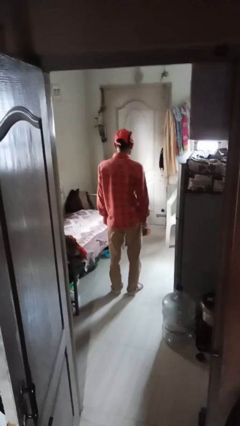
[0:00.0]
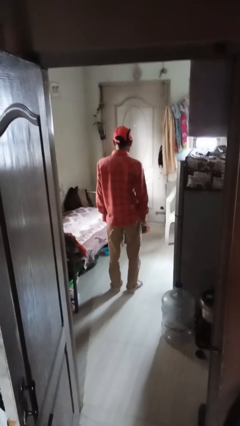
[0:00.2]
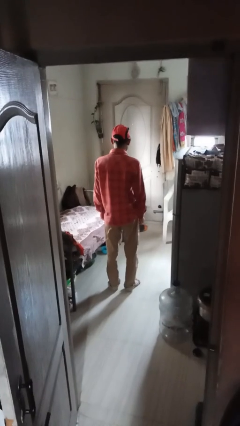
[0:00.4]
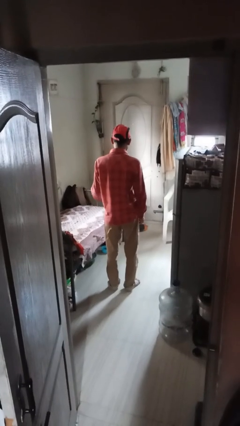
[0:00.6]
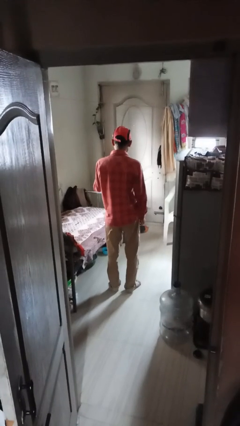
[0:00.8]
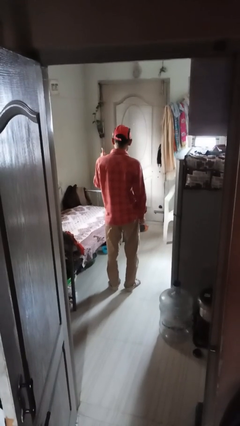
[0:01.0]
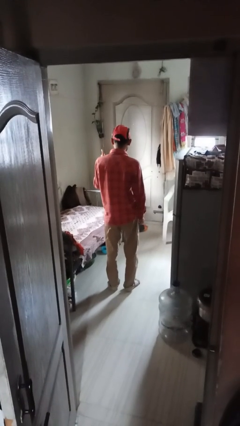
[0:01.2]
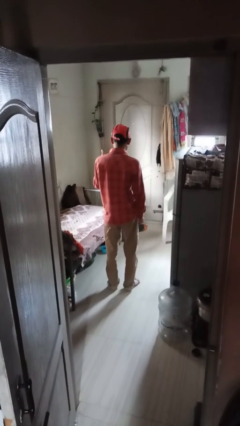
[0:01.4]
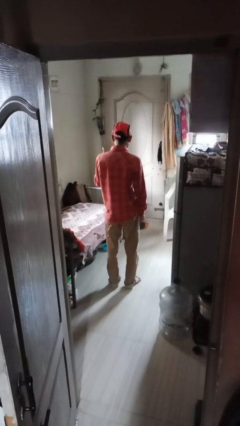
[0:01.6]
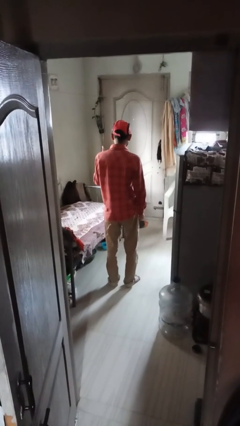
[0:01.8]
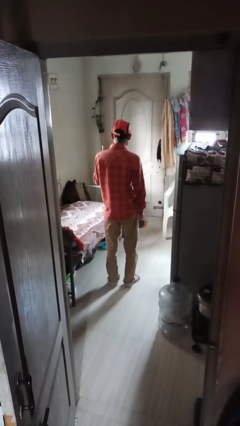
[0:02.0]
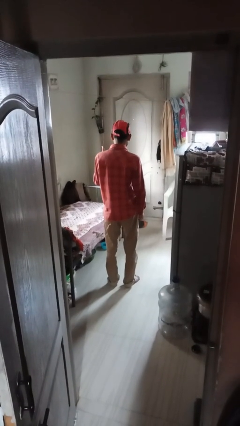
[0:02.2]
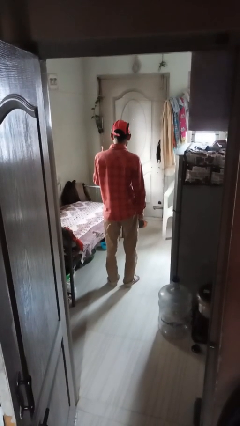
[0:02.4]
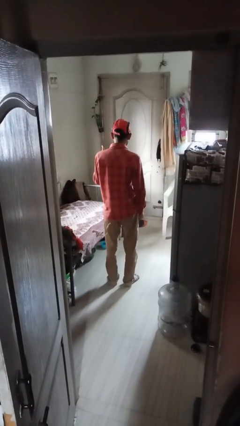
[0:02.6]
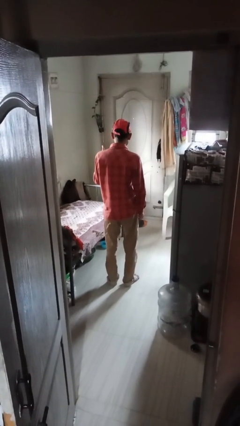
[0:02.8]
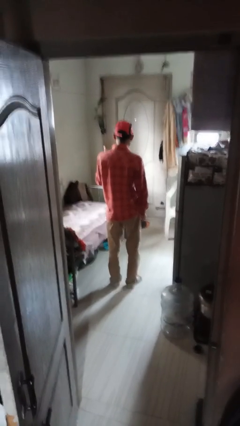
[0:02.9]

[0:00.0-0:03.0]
person gestures thumbs up

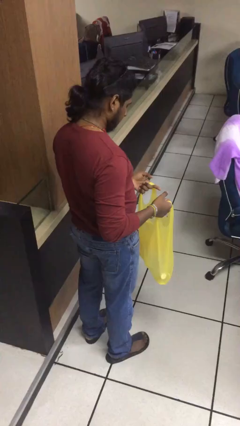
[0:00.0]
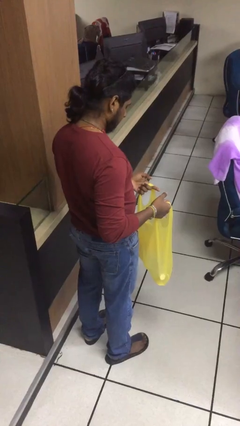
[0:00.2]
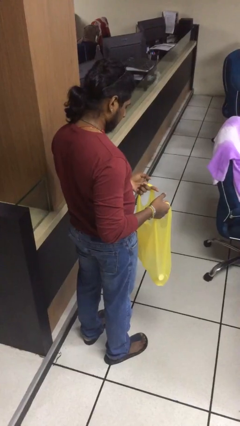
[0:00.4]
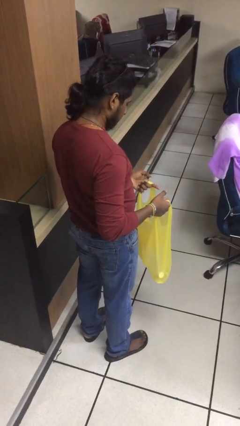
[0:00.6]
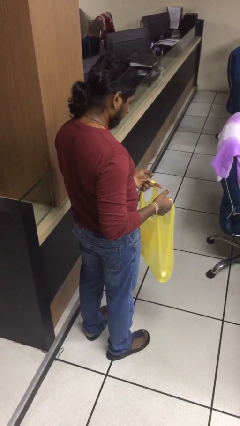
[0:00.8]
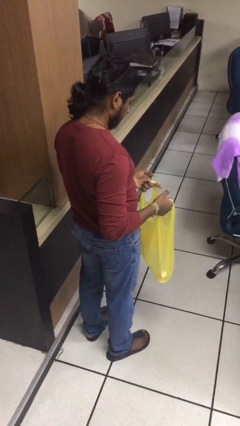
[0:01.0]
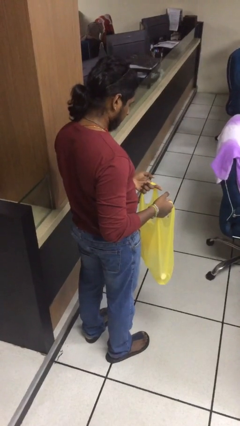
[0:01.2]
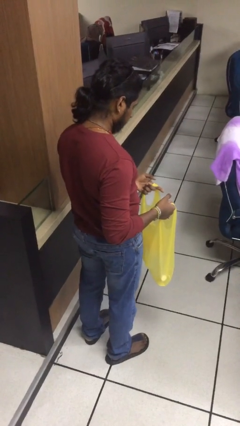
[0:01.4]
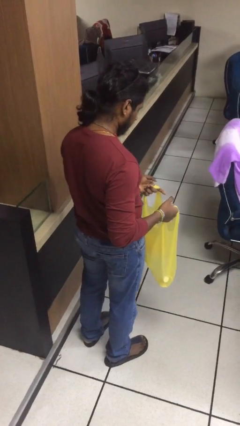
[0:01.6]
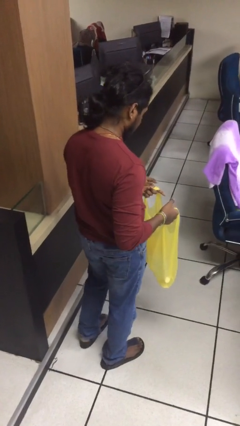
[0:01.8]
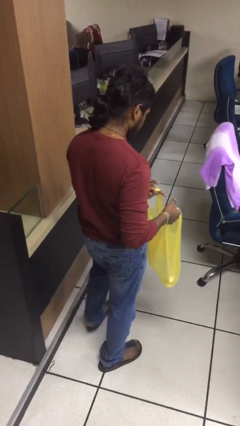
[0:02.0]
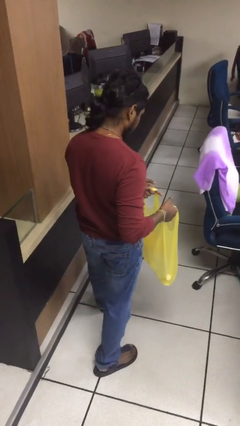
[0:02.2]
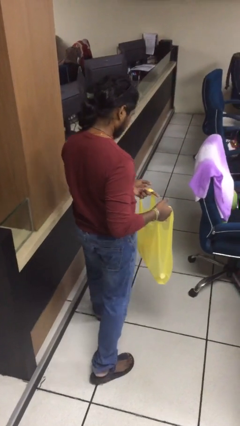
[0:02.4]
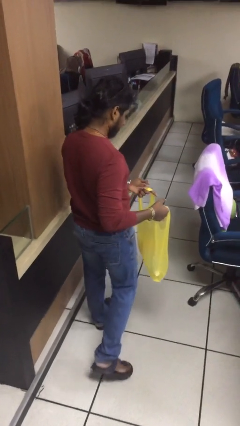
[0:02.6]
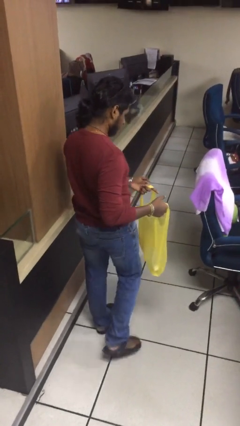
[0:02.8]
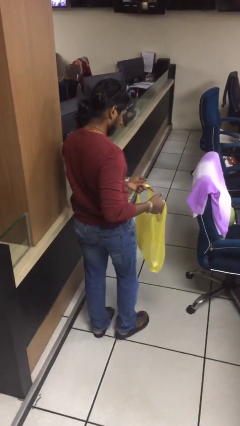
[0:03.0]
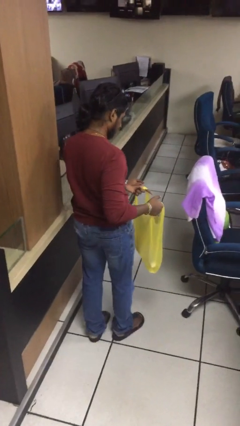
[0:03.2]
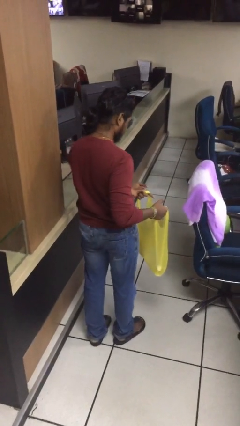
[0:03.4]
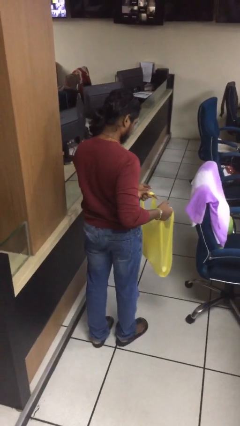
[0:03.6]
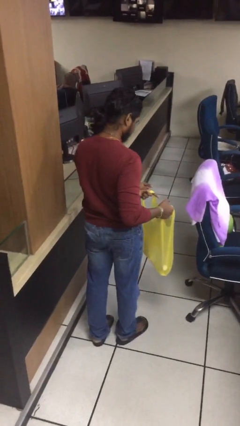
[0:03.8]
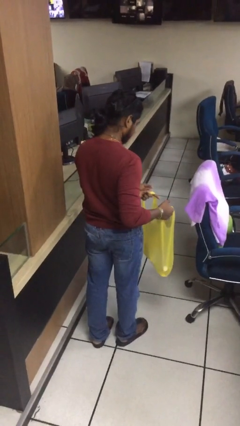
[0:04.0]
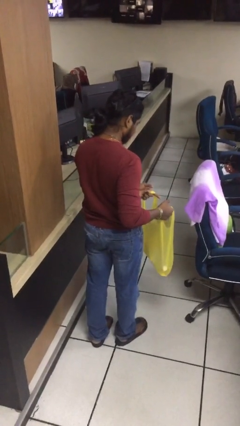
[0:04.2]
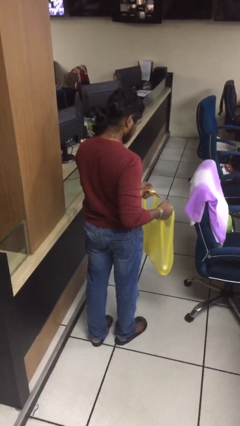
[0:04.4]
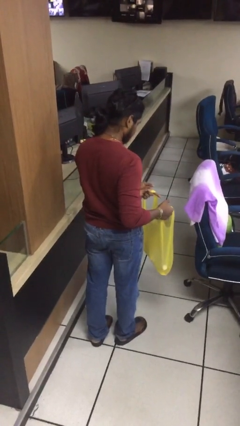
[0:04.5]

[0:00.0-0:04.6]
person carries groceries

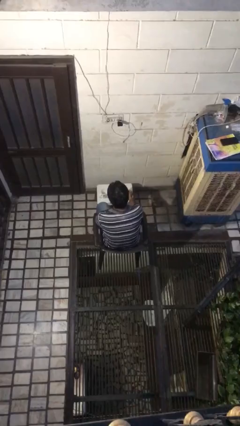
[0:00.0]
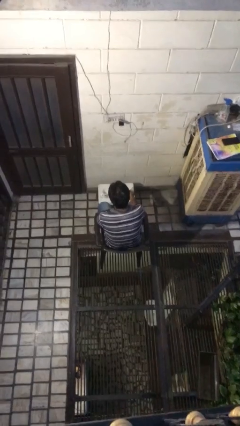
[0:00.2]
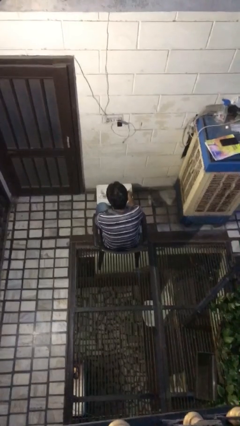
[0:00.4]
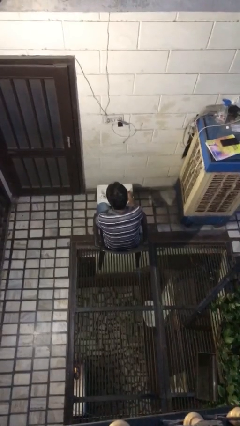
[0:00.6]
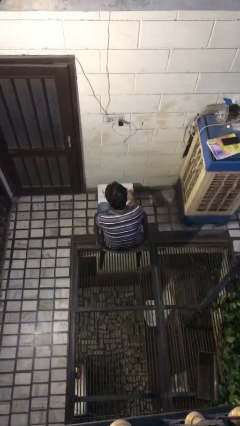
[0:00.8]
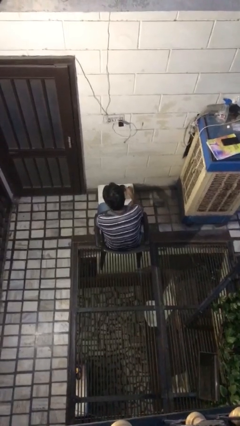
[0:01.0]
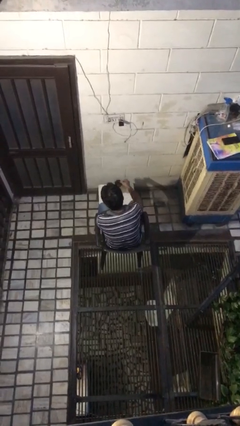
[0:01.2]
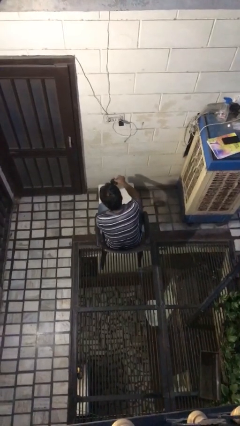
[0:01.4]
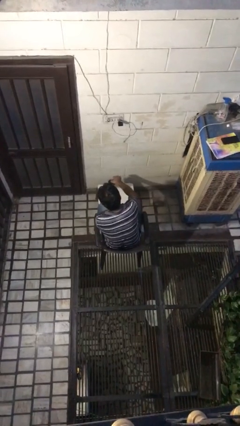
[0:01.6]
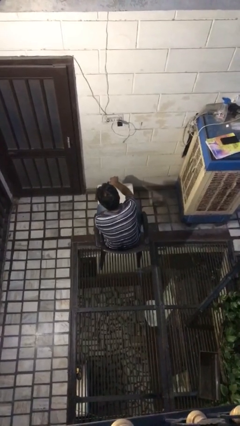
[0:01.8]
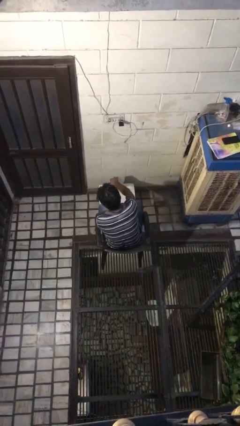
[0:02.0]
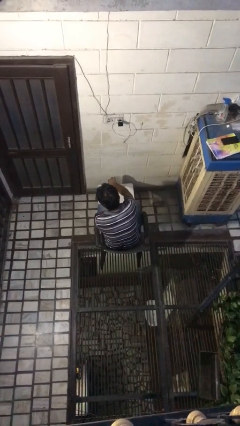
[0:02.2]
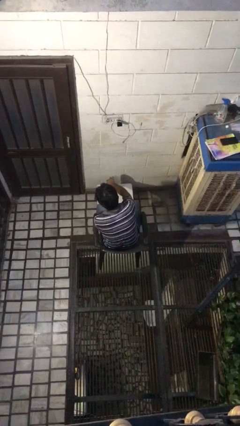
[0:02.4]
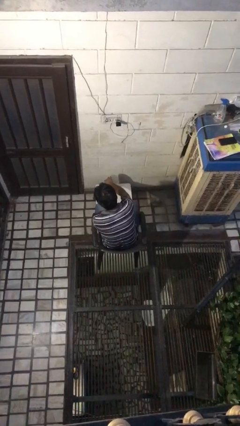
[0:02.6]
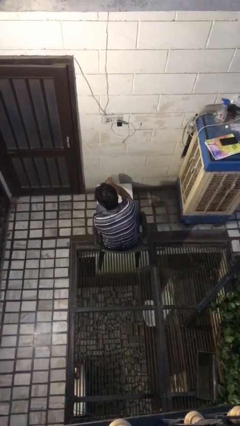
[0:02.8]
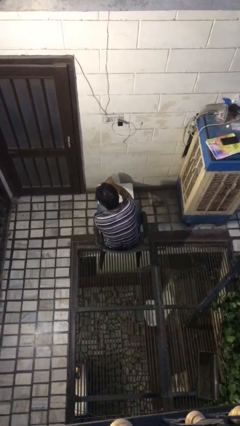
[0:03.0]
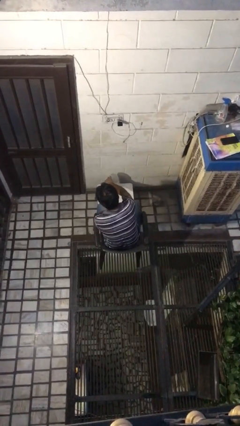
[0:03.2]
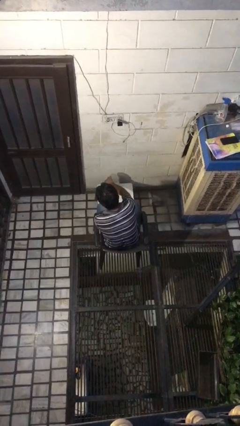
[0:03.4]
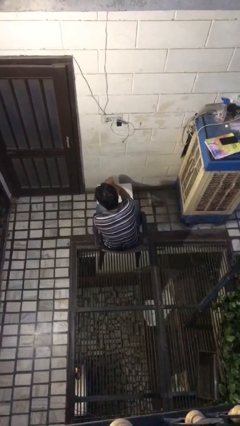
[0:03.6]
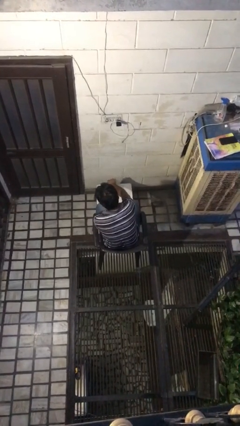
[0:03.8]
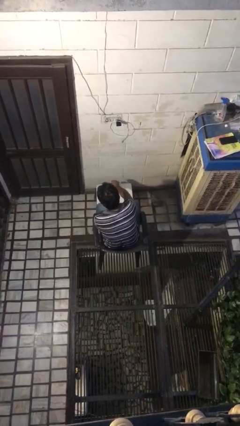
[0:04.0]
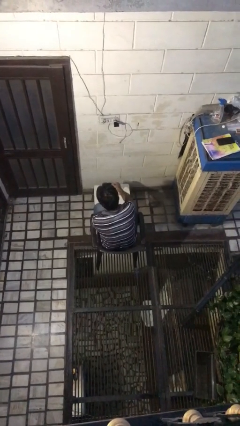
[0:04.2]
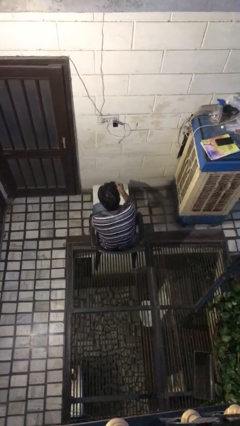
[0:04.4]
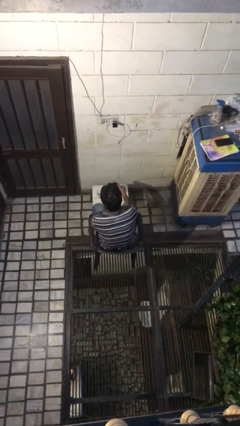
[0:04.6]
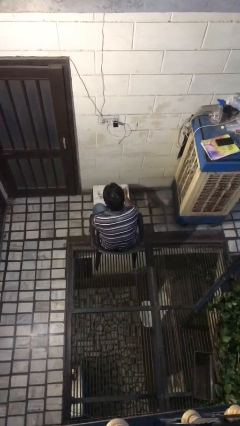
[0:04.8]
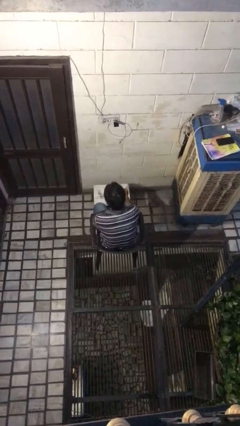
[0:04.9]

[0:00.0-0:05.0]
person pours coffee into mug

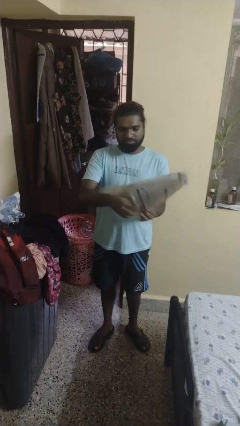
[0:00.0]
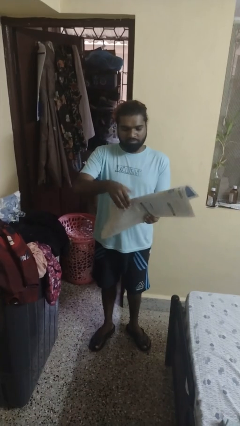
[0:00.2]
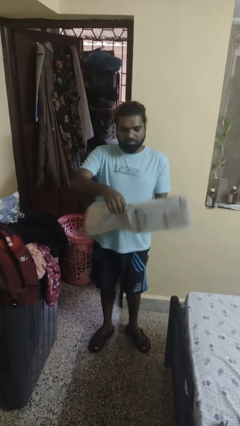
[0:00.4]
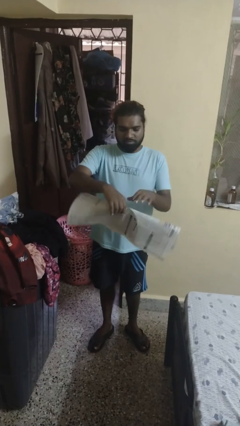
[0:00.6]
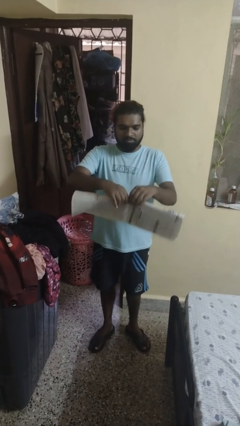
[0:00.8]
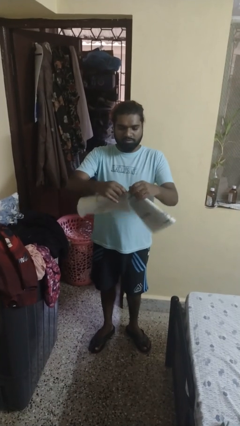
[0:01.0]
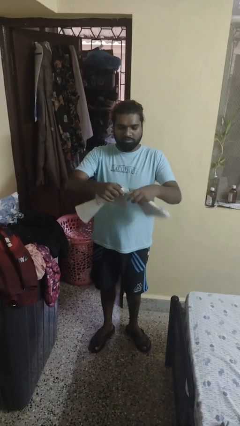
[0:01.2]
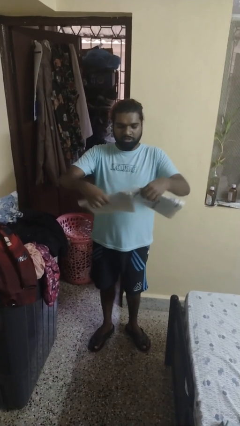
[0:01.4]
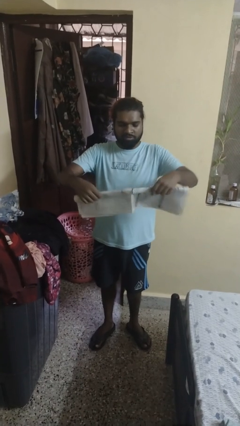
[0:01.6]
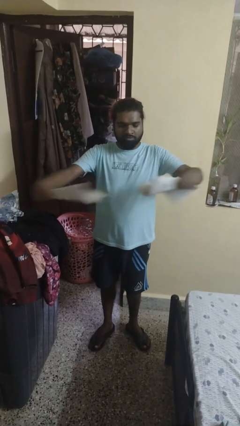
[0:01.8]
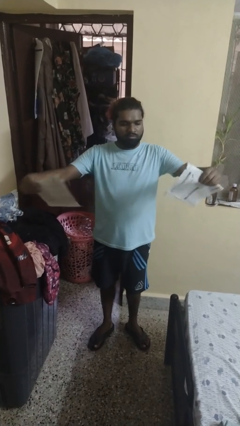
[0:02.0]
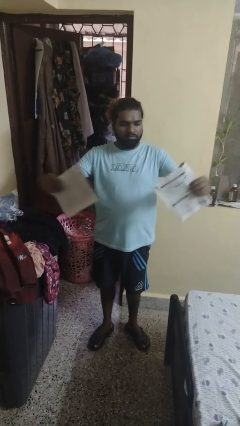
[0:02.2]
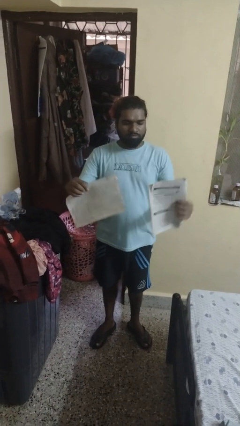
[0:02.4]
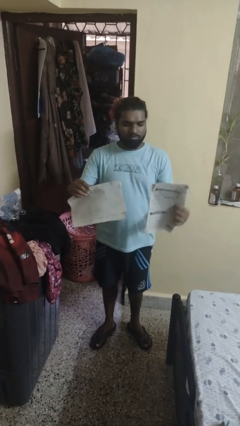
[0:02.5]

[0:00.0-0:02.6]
person tears paper

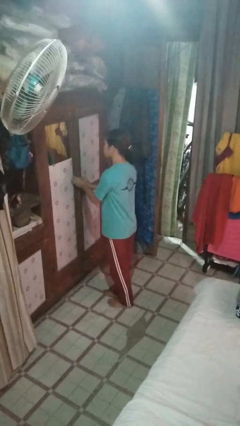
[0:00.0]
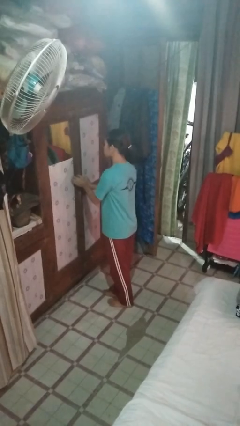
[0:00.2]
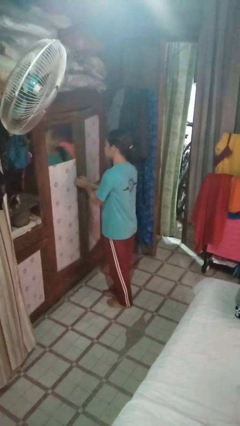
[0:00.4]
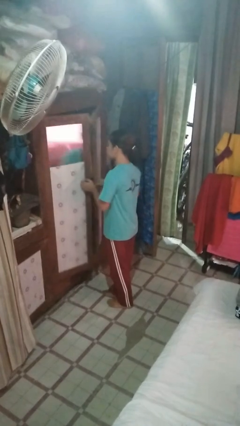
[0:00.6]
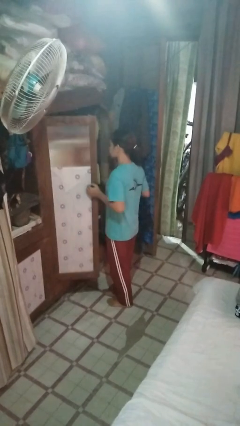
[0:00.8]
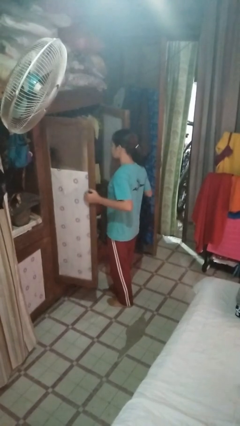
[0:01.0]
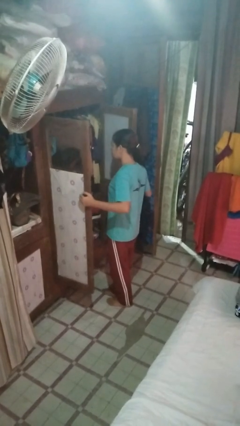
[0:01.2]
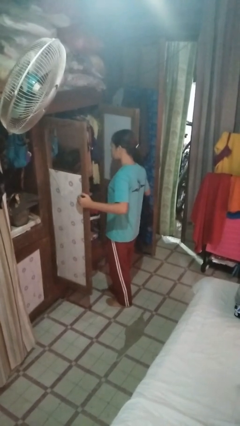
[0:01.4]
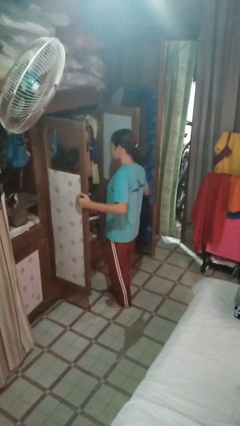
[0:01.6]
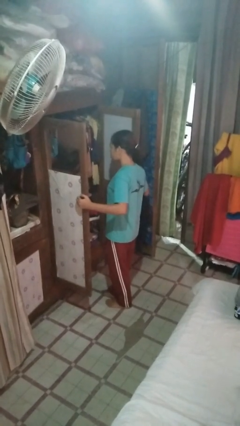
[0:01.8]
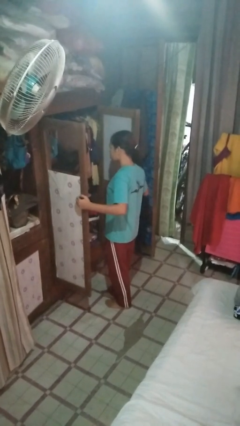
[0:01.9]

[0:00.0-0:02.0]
person opens closet door

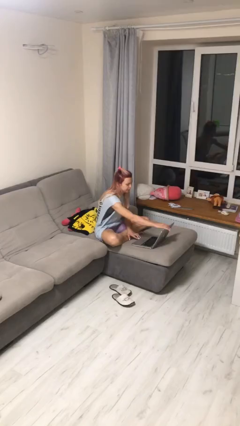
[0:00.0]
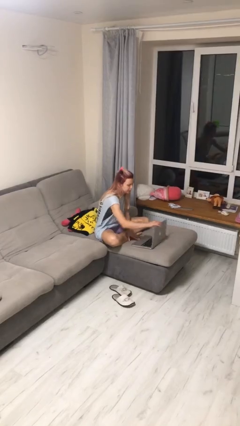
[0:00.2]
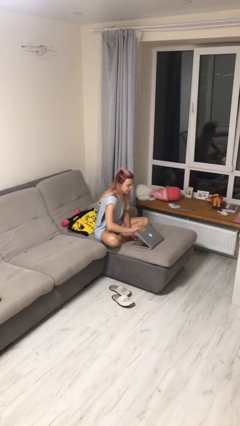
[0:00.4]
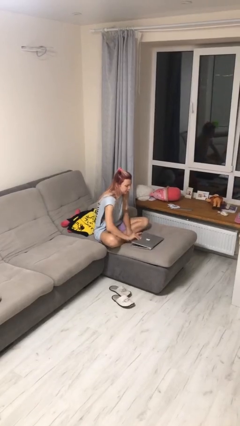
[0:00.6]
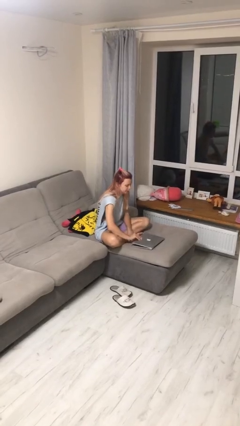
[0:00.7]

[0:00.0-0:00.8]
person closes laptop
